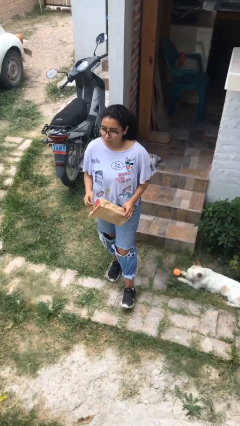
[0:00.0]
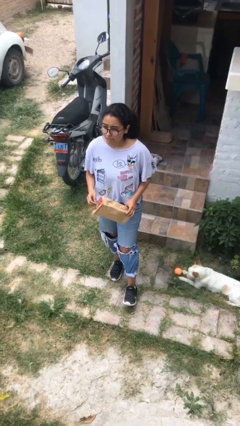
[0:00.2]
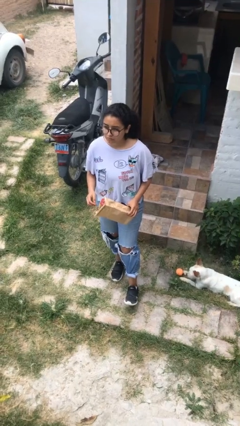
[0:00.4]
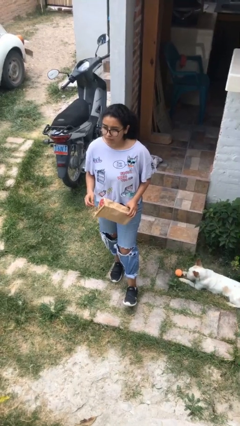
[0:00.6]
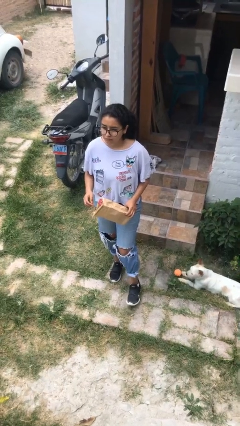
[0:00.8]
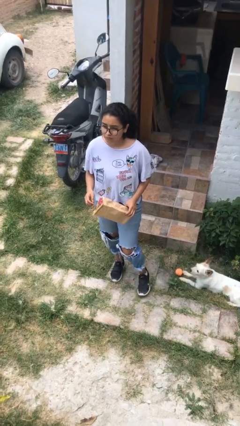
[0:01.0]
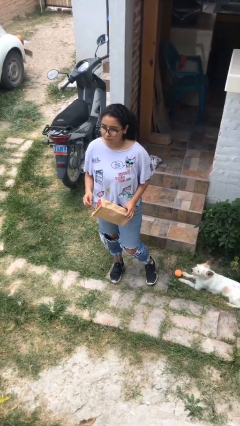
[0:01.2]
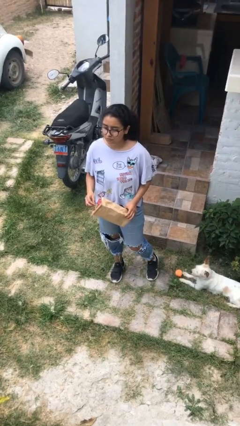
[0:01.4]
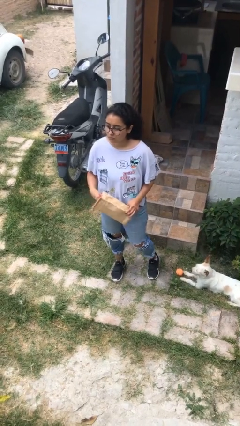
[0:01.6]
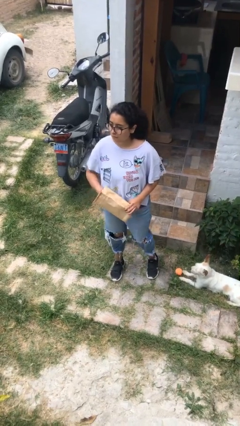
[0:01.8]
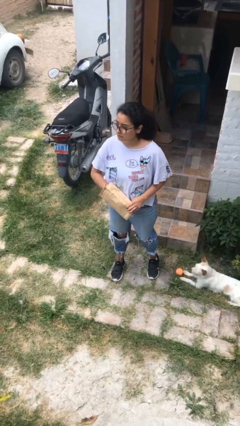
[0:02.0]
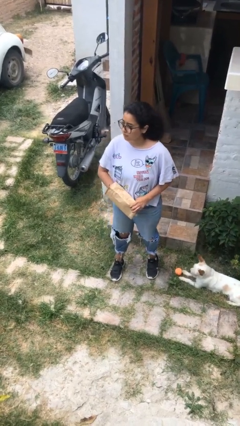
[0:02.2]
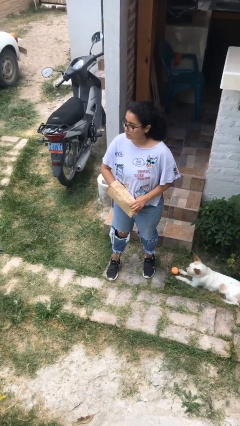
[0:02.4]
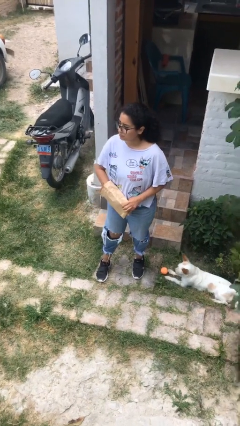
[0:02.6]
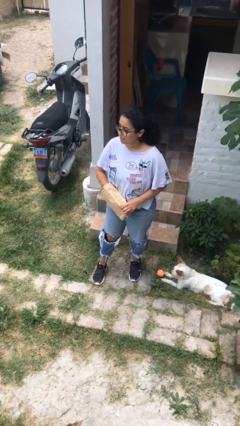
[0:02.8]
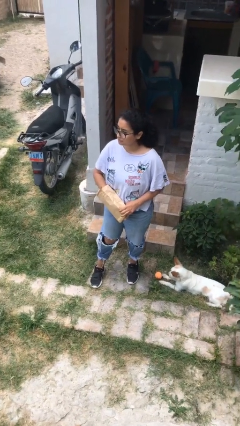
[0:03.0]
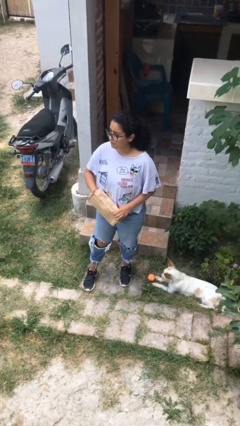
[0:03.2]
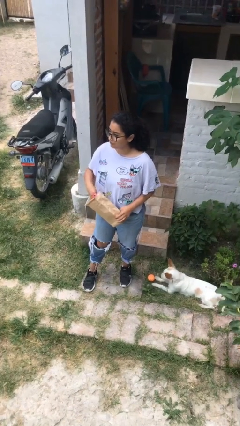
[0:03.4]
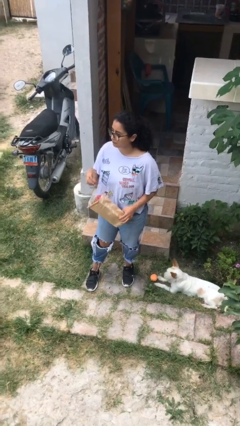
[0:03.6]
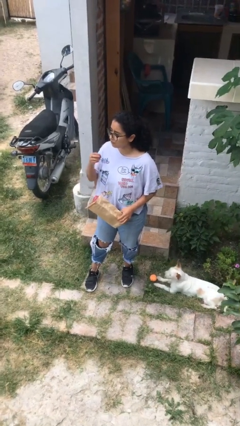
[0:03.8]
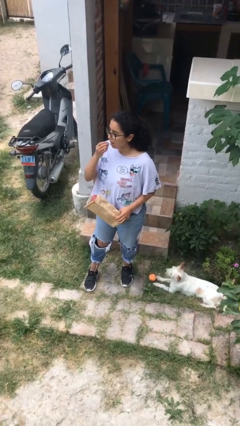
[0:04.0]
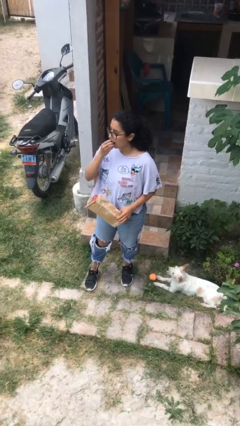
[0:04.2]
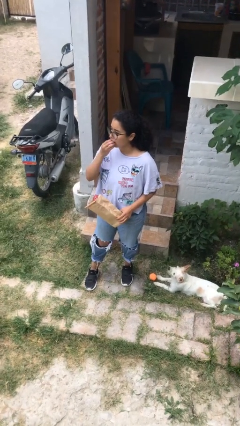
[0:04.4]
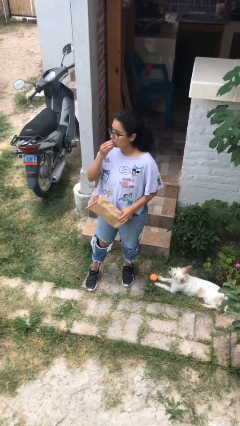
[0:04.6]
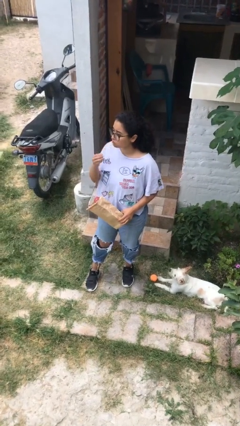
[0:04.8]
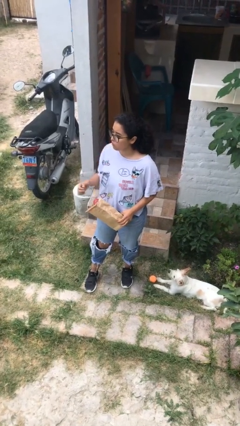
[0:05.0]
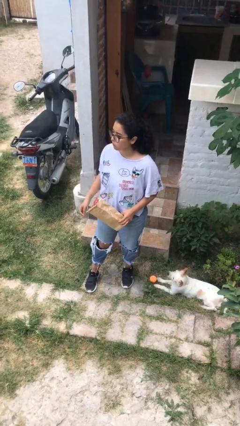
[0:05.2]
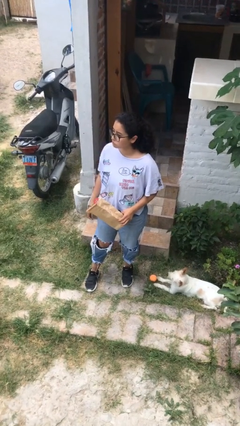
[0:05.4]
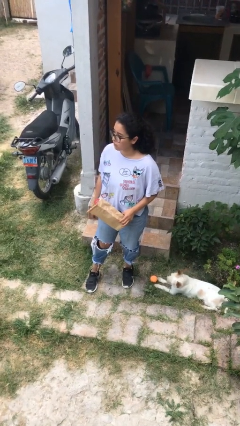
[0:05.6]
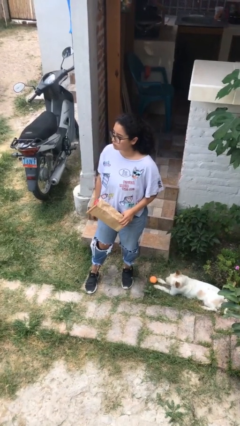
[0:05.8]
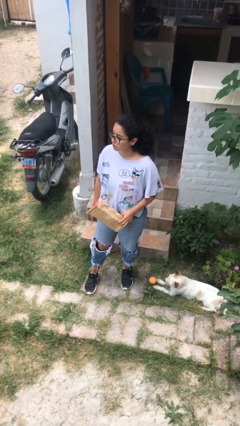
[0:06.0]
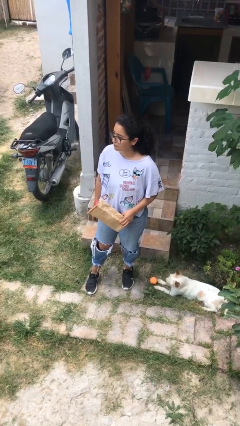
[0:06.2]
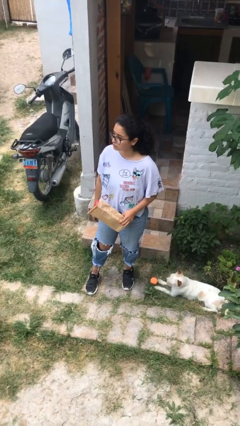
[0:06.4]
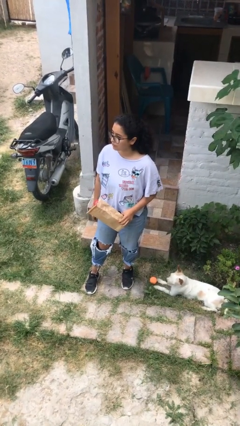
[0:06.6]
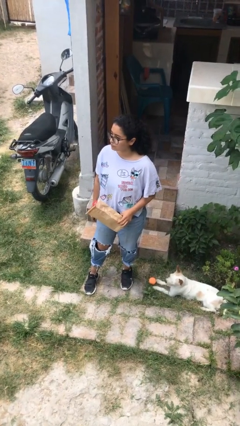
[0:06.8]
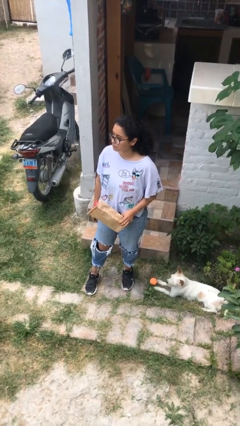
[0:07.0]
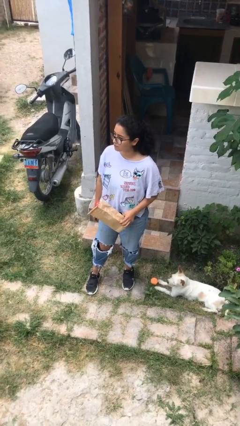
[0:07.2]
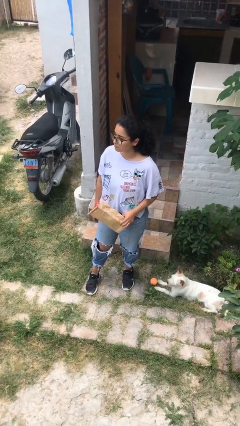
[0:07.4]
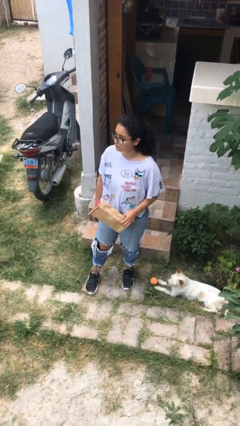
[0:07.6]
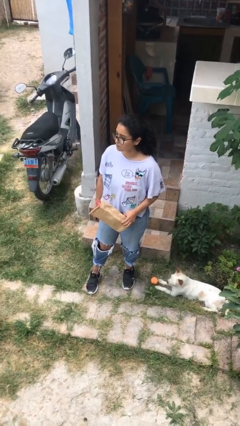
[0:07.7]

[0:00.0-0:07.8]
person eats snack from bag

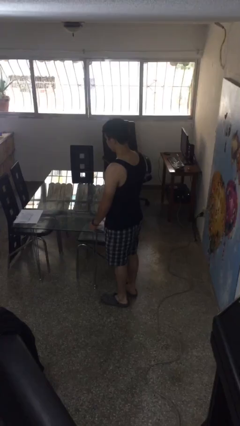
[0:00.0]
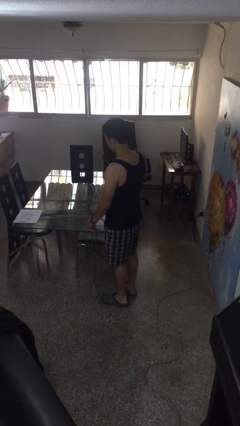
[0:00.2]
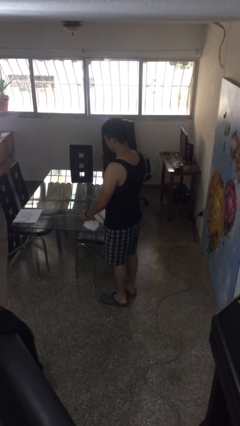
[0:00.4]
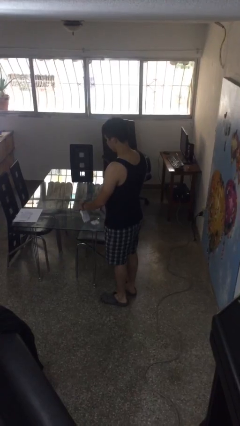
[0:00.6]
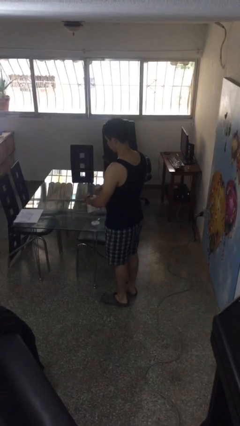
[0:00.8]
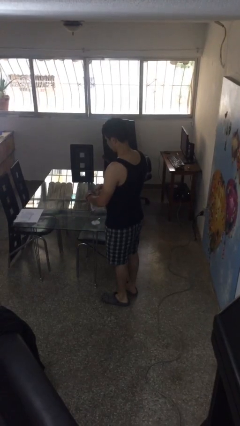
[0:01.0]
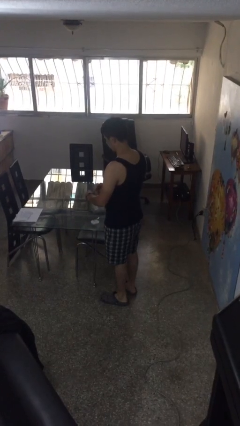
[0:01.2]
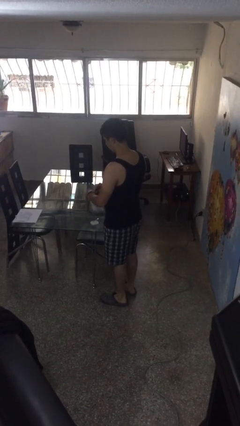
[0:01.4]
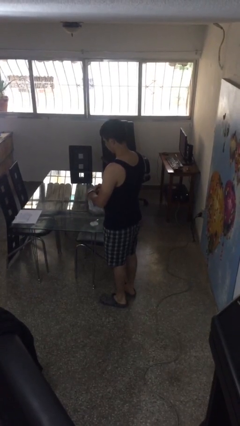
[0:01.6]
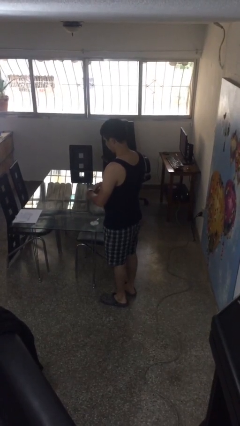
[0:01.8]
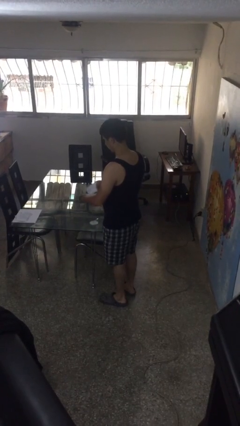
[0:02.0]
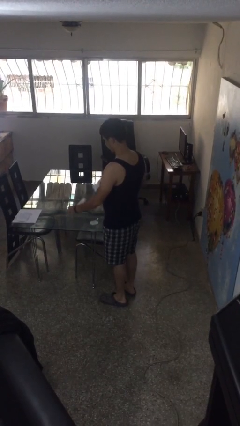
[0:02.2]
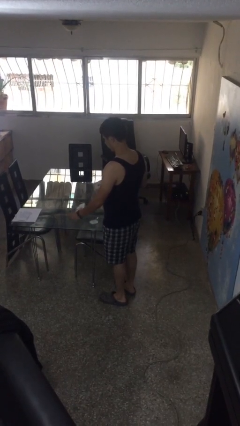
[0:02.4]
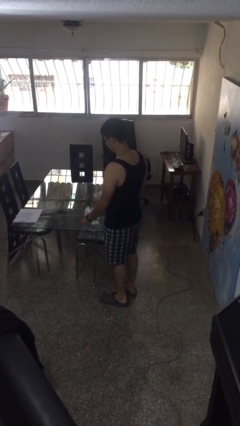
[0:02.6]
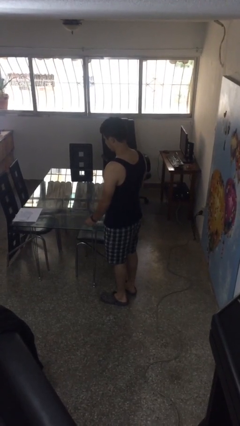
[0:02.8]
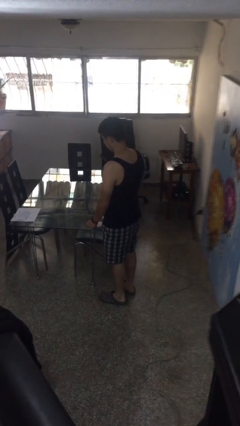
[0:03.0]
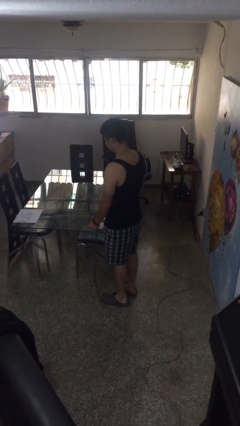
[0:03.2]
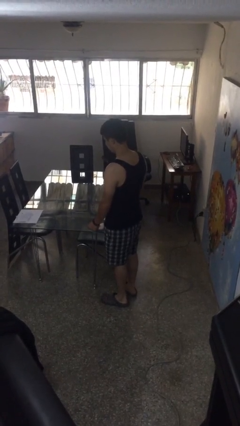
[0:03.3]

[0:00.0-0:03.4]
person tears paper

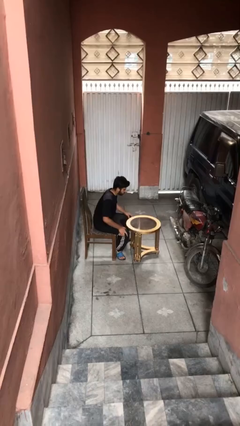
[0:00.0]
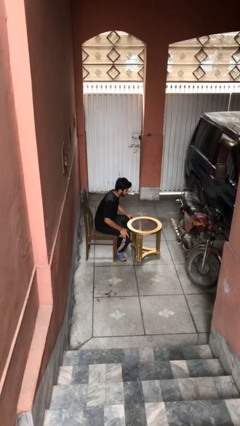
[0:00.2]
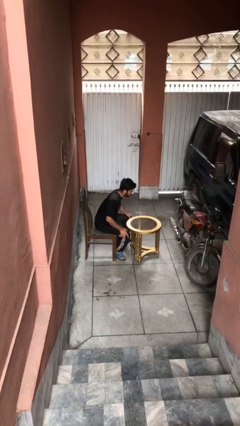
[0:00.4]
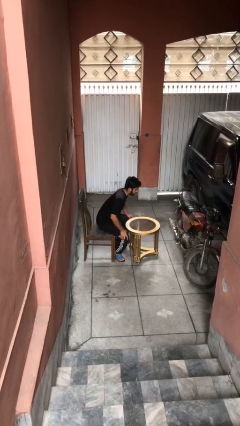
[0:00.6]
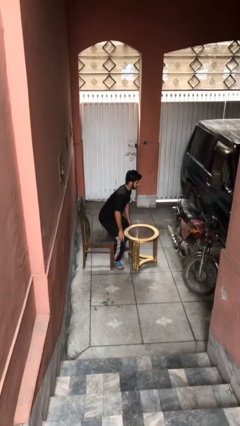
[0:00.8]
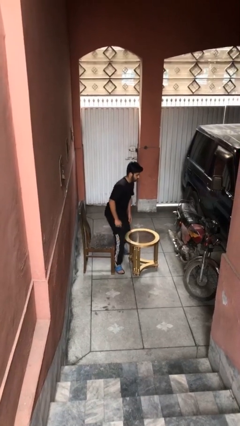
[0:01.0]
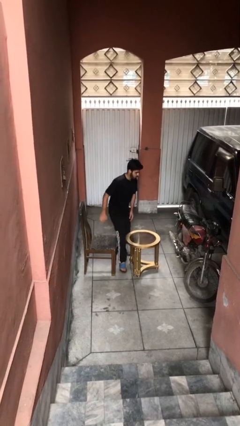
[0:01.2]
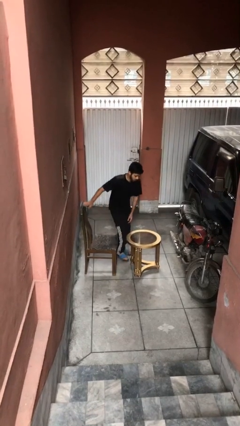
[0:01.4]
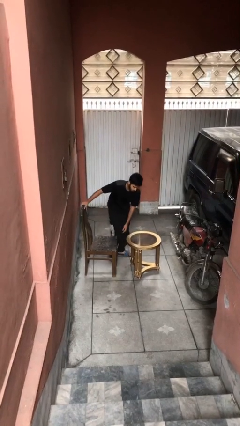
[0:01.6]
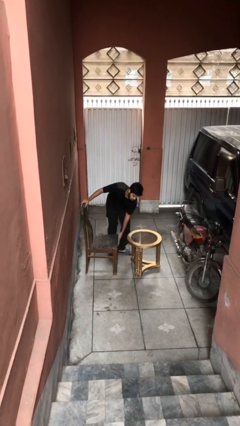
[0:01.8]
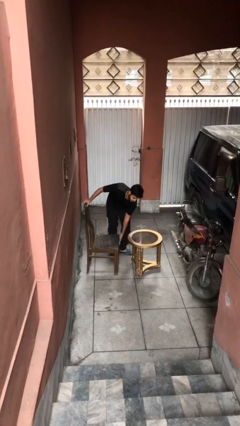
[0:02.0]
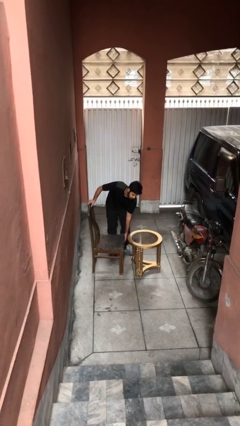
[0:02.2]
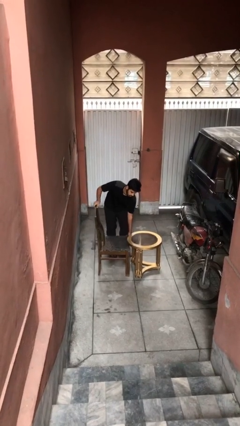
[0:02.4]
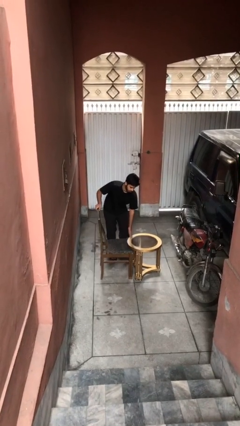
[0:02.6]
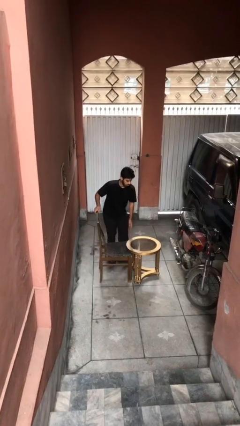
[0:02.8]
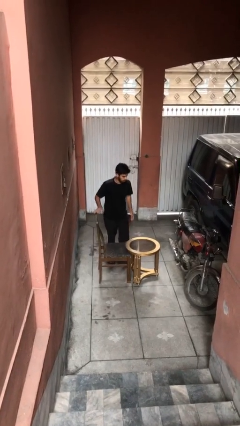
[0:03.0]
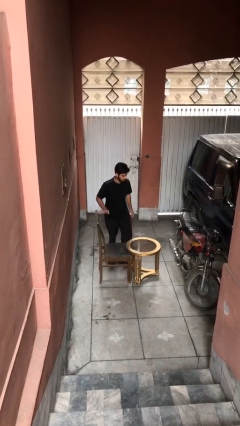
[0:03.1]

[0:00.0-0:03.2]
person stands up

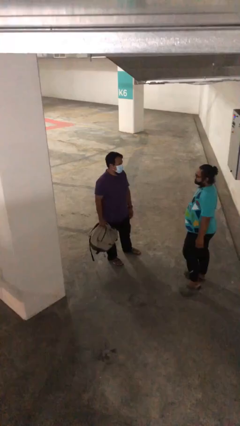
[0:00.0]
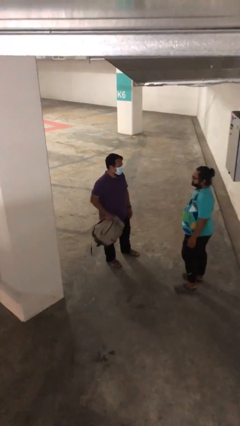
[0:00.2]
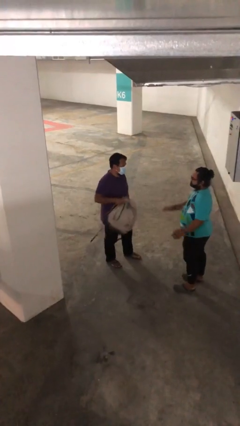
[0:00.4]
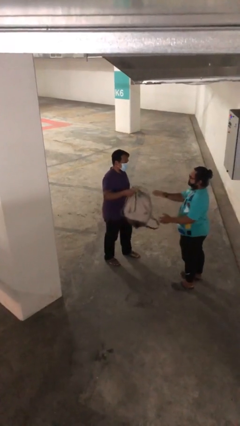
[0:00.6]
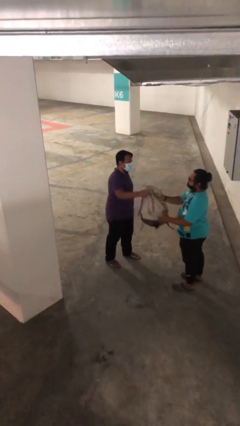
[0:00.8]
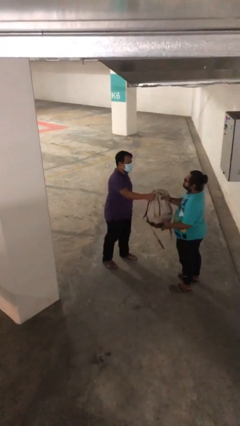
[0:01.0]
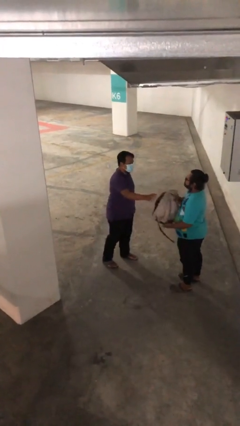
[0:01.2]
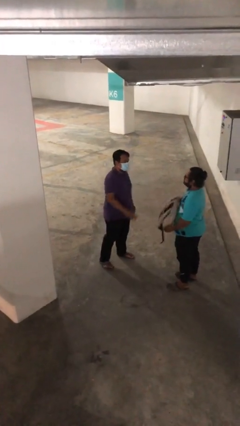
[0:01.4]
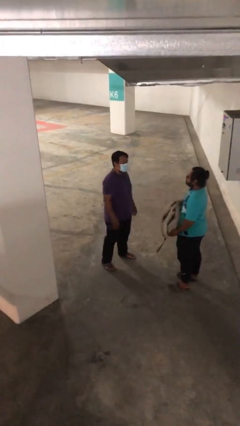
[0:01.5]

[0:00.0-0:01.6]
person transfers object to person

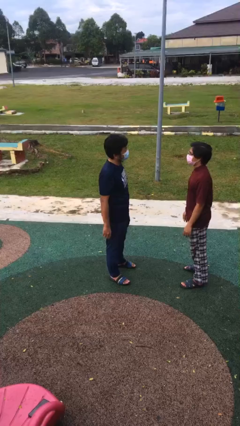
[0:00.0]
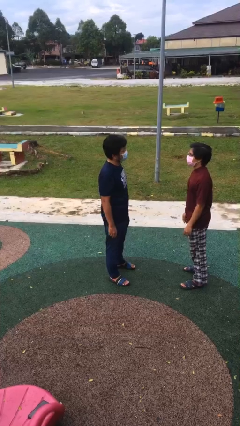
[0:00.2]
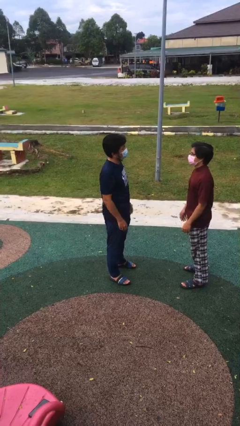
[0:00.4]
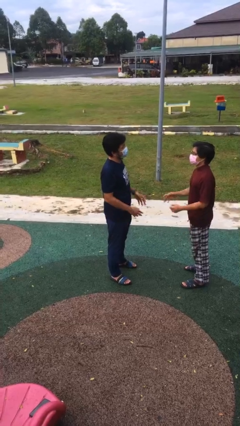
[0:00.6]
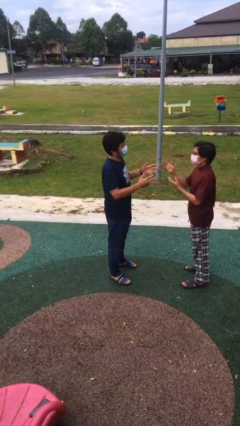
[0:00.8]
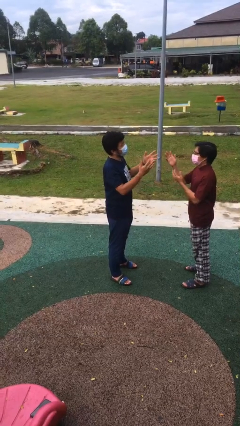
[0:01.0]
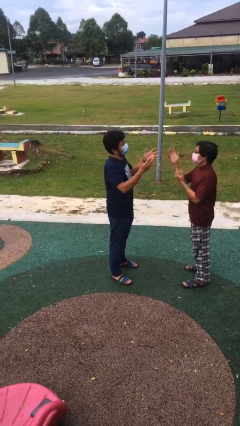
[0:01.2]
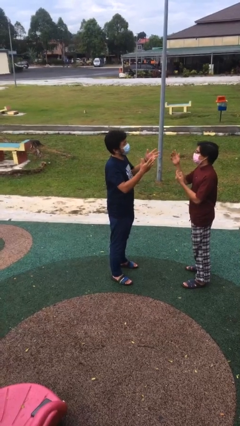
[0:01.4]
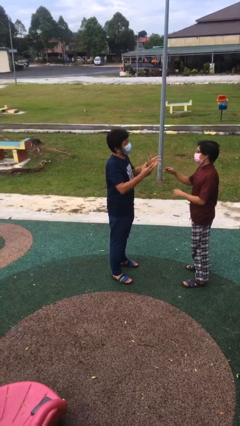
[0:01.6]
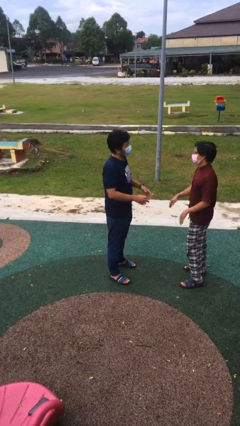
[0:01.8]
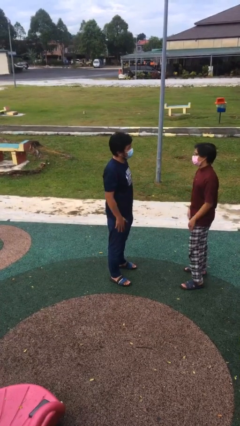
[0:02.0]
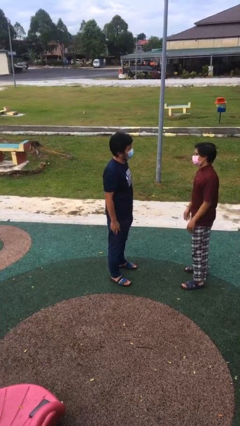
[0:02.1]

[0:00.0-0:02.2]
person talks to person
